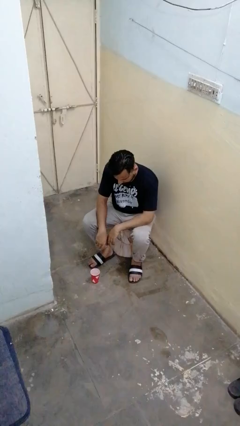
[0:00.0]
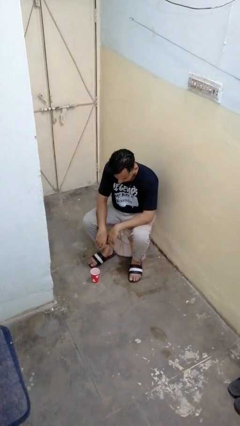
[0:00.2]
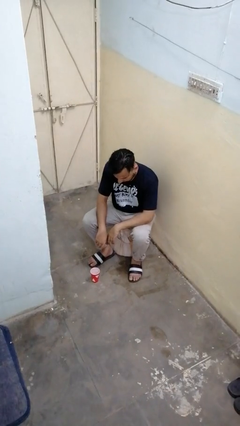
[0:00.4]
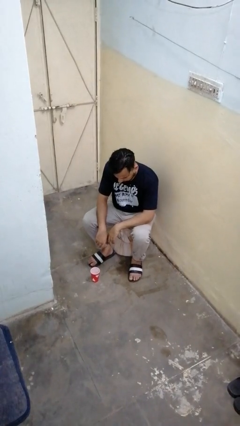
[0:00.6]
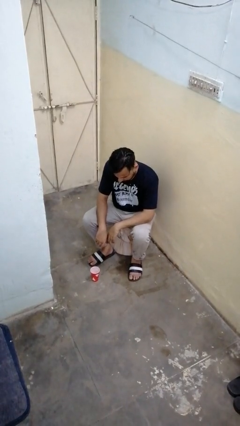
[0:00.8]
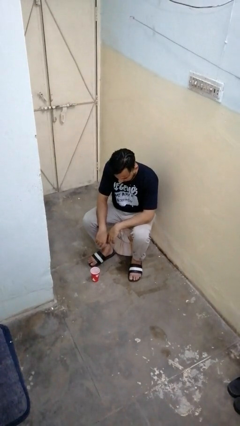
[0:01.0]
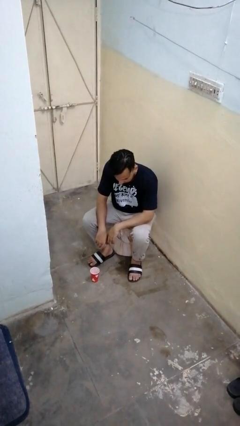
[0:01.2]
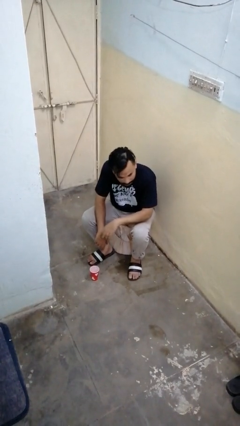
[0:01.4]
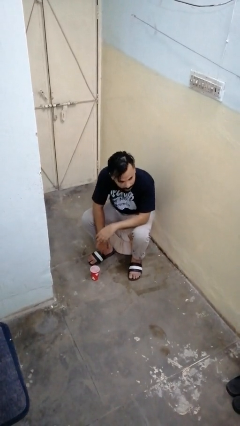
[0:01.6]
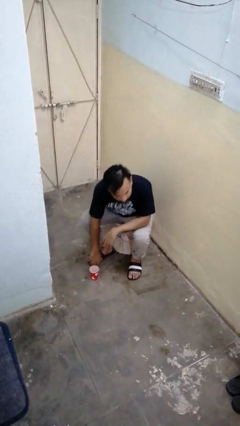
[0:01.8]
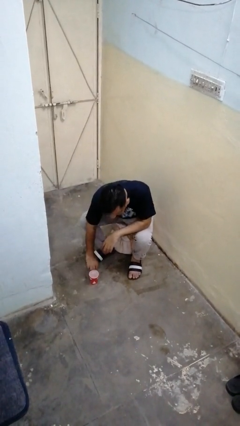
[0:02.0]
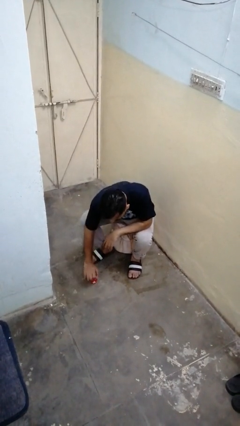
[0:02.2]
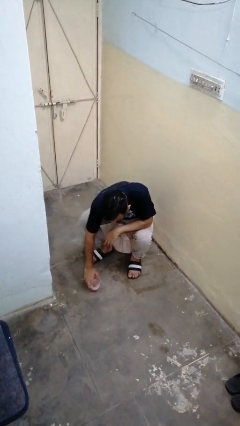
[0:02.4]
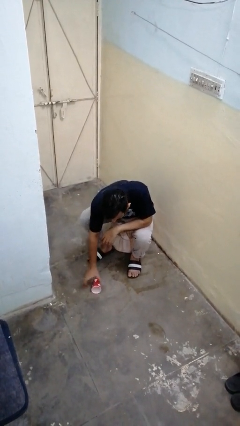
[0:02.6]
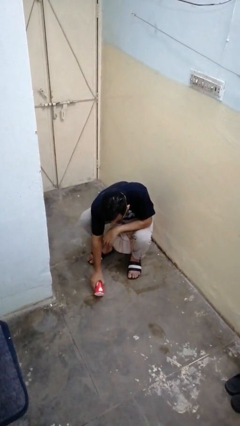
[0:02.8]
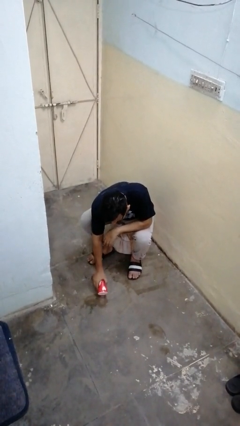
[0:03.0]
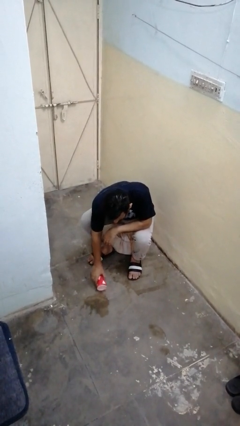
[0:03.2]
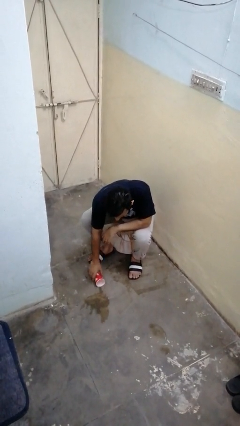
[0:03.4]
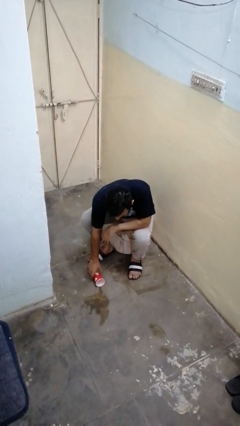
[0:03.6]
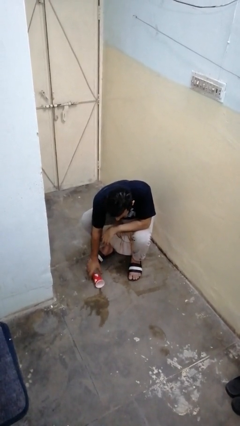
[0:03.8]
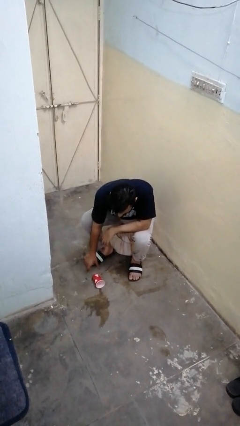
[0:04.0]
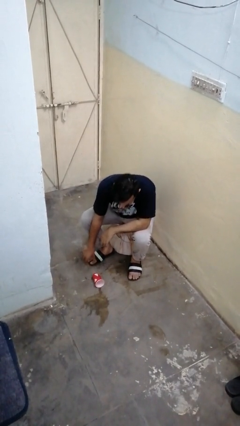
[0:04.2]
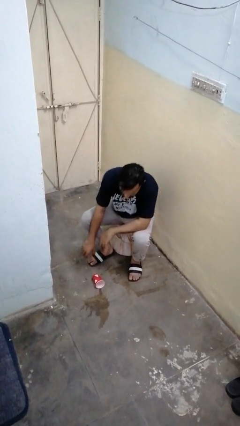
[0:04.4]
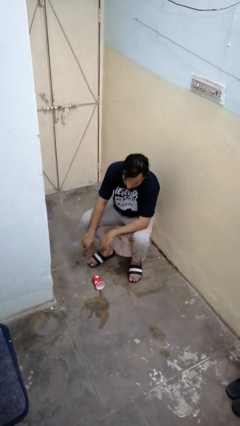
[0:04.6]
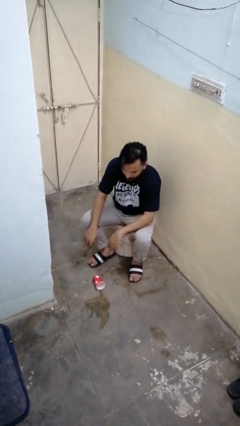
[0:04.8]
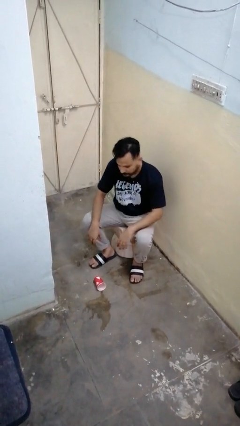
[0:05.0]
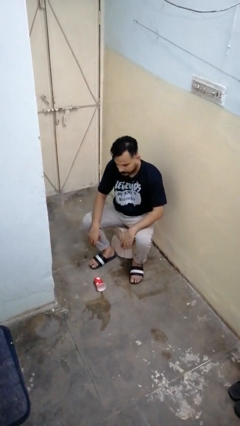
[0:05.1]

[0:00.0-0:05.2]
person spills on floor

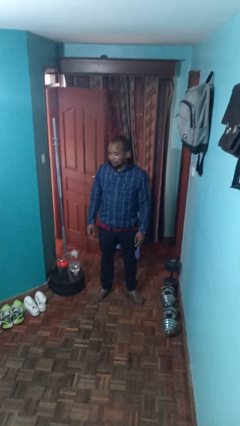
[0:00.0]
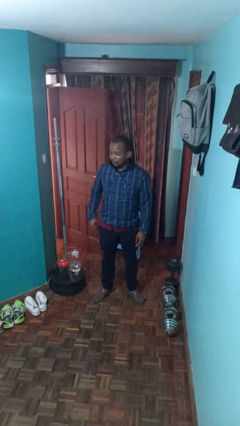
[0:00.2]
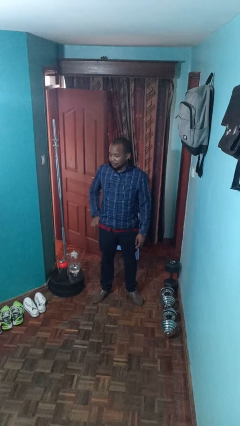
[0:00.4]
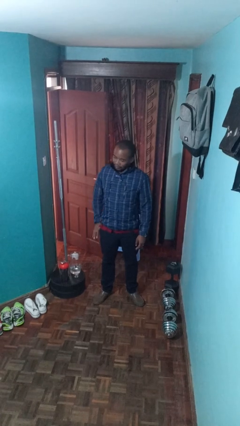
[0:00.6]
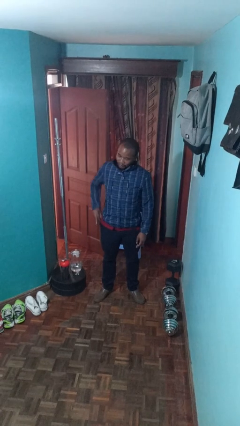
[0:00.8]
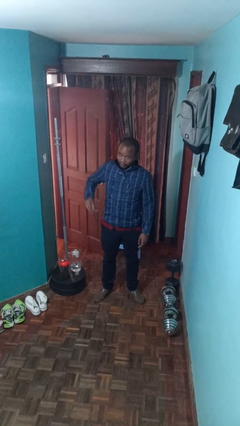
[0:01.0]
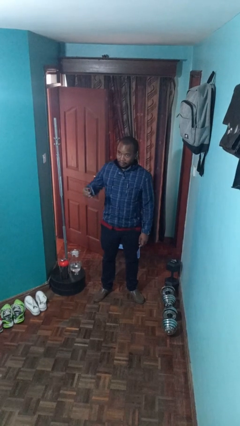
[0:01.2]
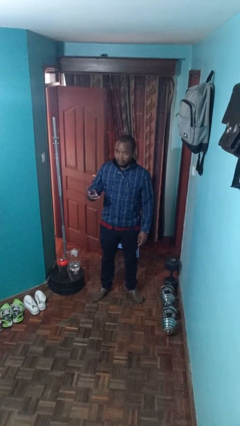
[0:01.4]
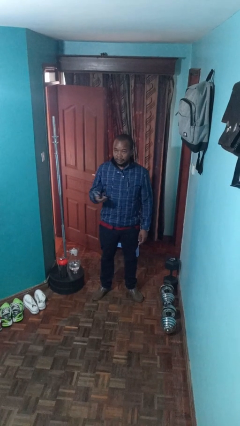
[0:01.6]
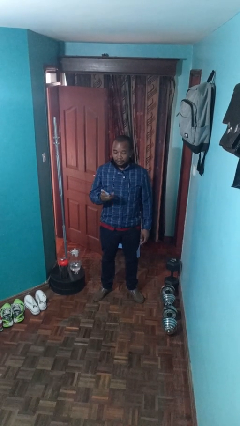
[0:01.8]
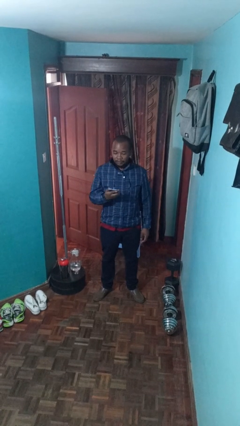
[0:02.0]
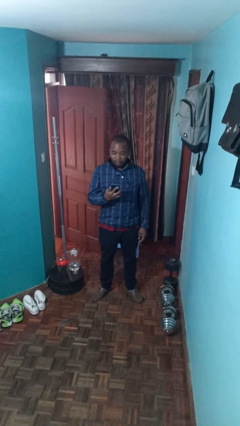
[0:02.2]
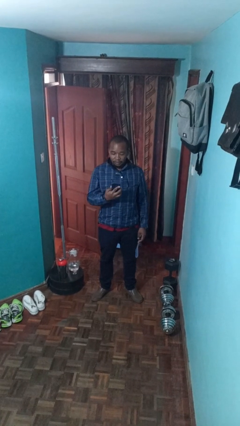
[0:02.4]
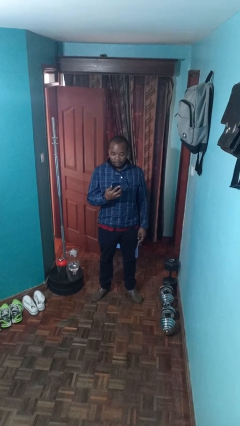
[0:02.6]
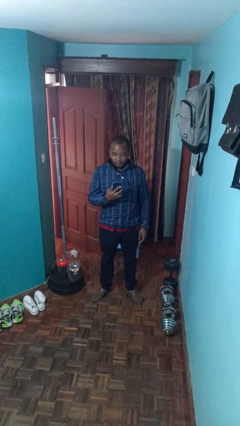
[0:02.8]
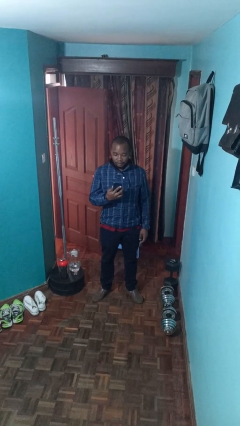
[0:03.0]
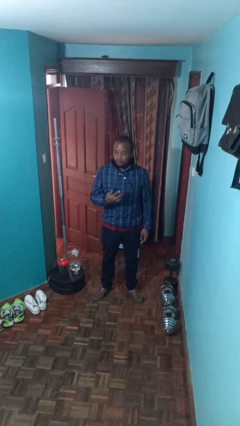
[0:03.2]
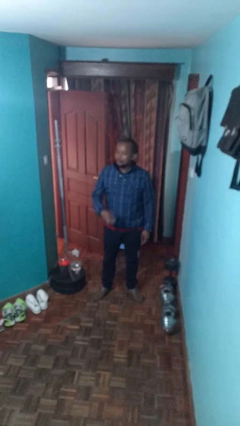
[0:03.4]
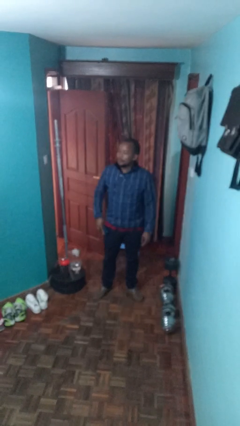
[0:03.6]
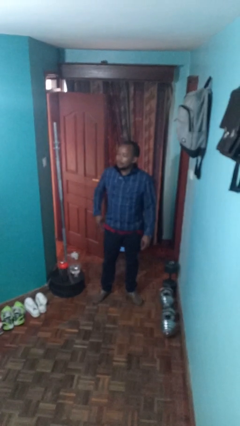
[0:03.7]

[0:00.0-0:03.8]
person takes phone from pocket

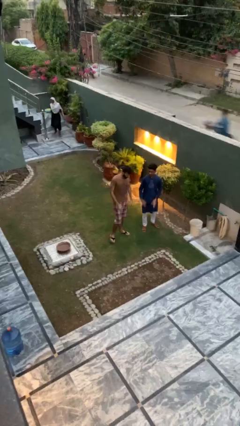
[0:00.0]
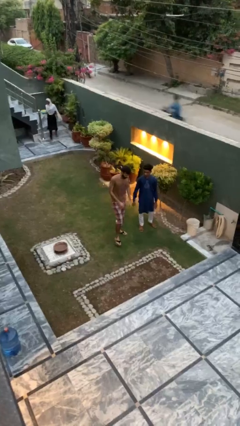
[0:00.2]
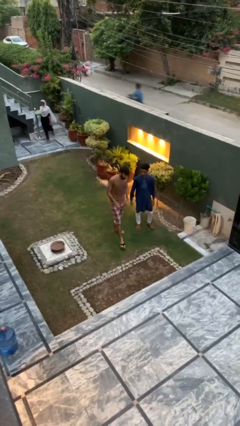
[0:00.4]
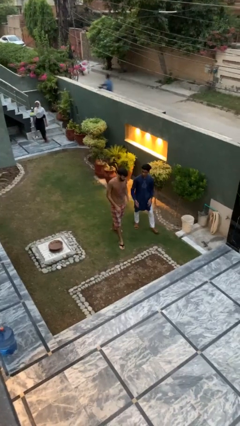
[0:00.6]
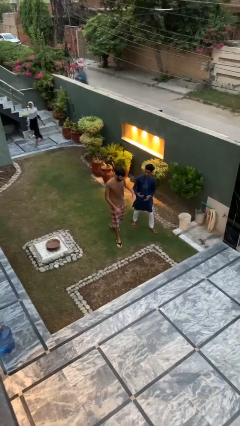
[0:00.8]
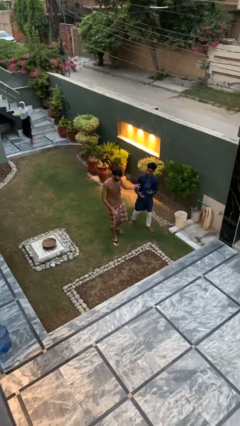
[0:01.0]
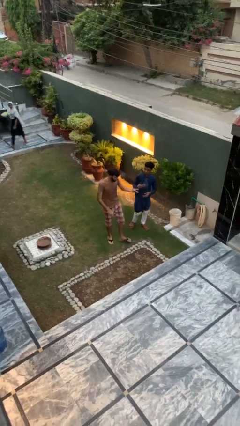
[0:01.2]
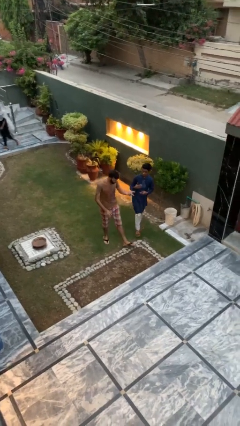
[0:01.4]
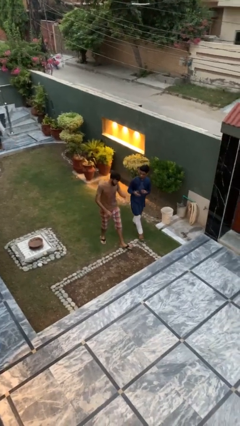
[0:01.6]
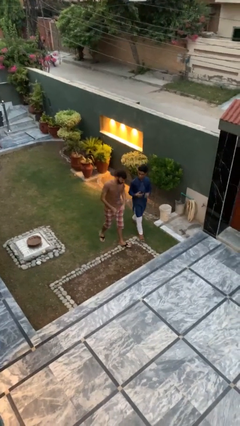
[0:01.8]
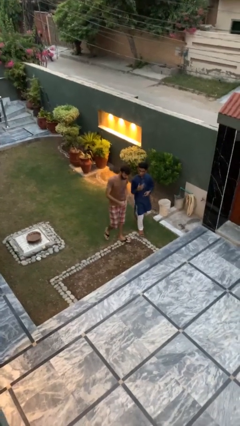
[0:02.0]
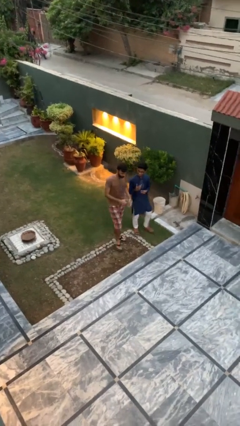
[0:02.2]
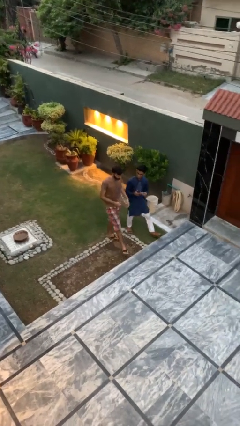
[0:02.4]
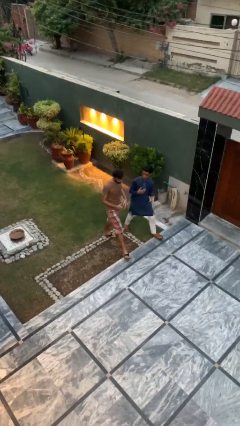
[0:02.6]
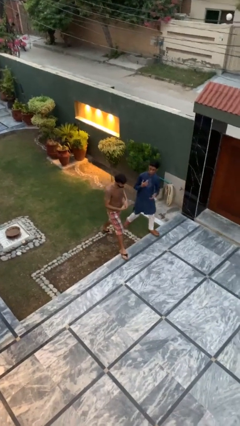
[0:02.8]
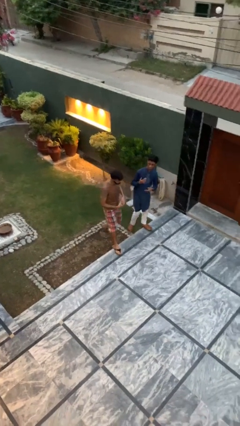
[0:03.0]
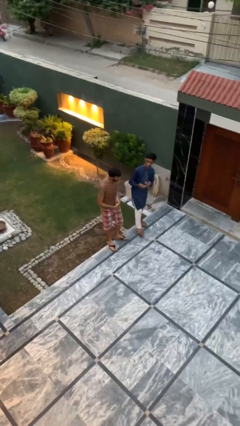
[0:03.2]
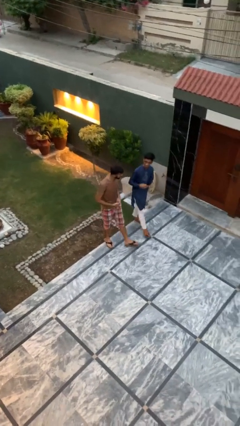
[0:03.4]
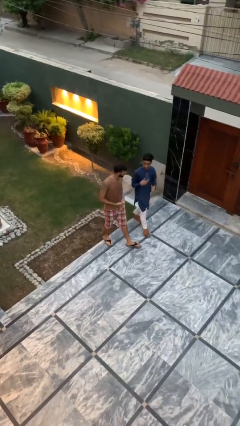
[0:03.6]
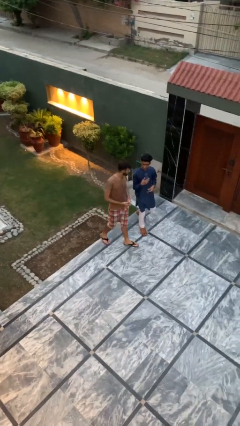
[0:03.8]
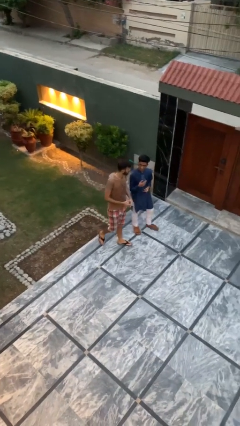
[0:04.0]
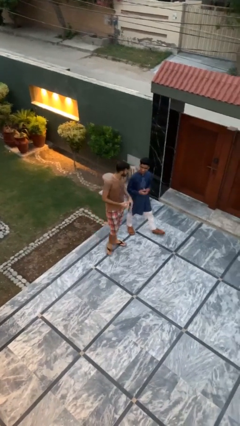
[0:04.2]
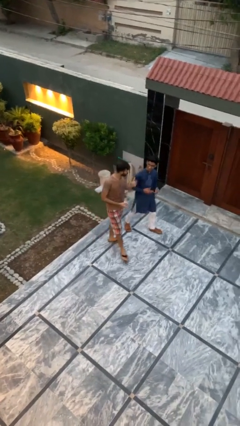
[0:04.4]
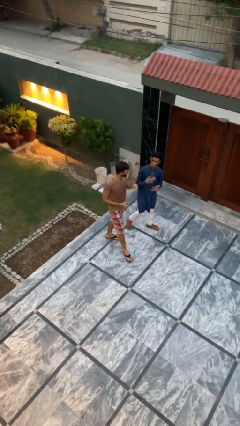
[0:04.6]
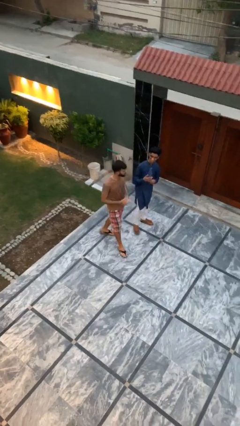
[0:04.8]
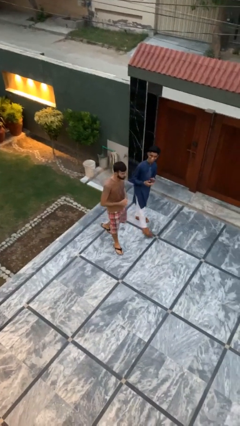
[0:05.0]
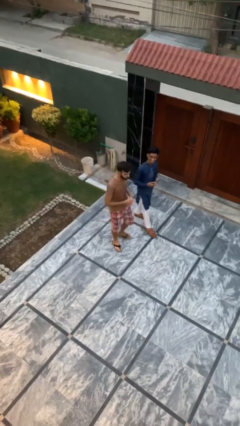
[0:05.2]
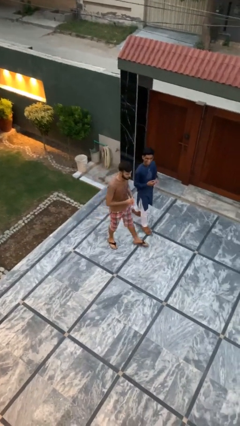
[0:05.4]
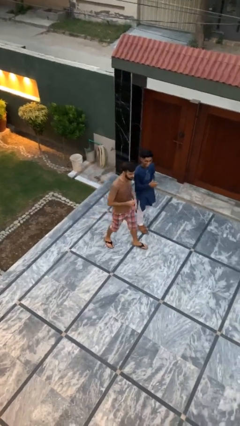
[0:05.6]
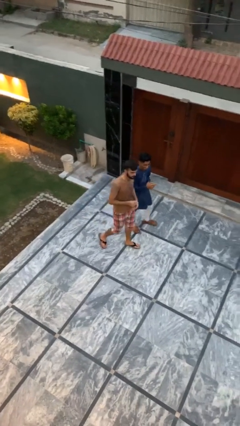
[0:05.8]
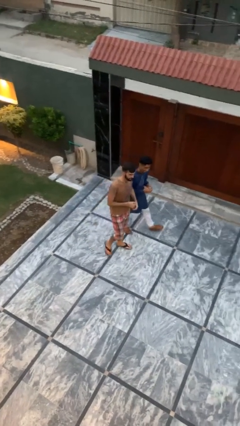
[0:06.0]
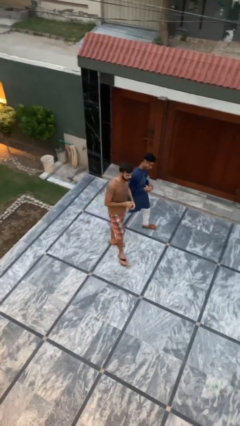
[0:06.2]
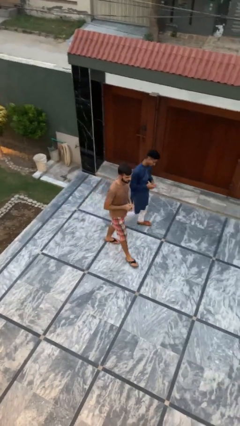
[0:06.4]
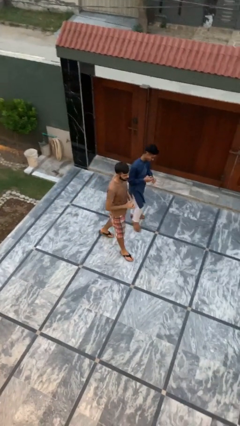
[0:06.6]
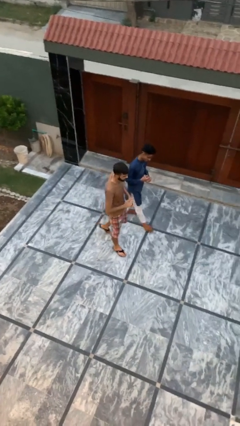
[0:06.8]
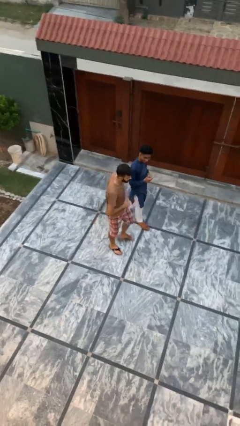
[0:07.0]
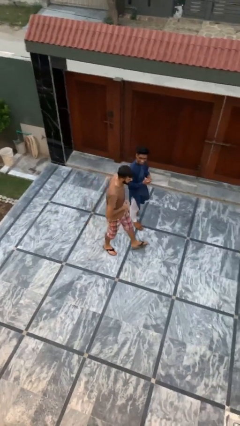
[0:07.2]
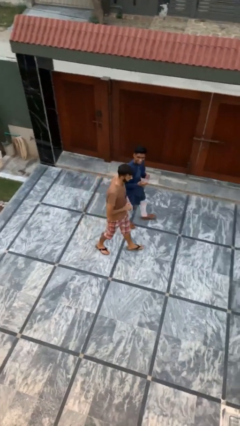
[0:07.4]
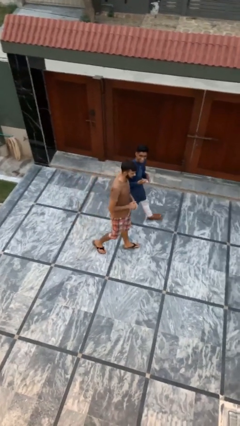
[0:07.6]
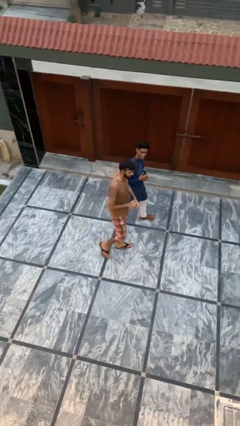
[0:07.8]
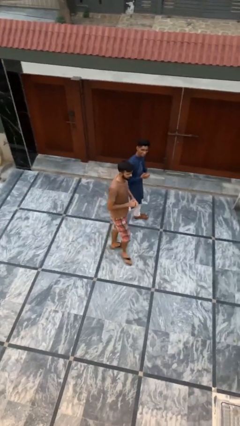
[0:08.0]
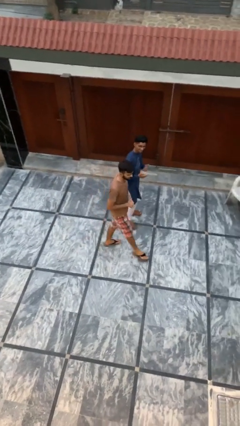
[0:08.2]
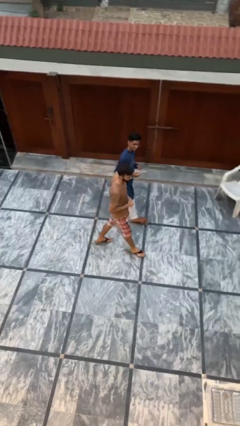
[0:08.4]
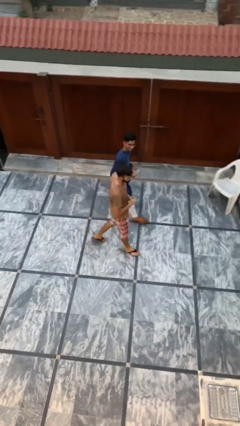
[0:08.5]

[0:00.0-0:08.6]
person talks to person

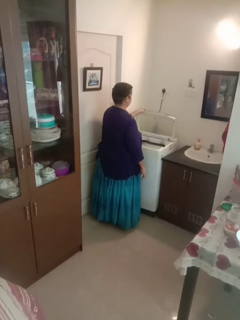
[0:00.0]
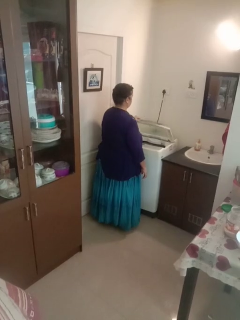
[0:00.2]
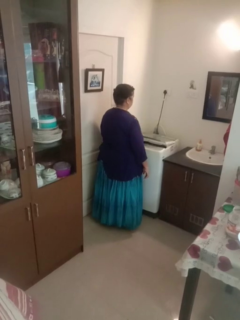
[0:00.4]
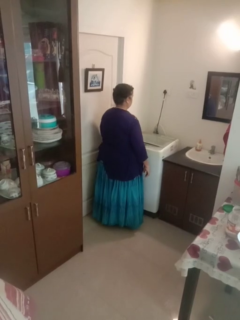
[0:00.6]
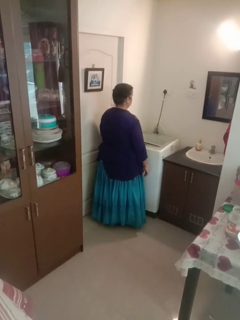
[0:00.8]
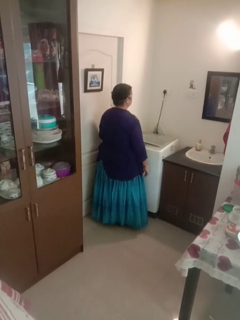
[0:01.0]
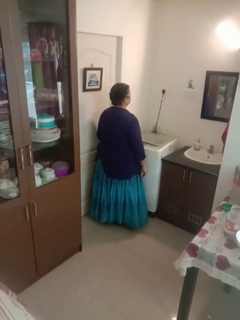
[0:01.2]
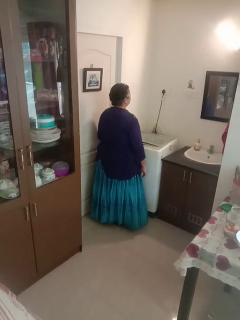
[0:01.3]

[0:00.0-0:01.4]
person closes clothes washer
